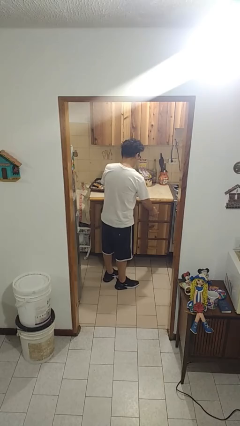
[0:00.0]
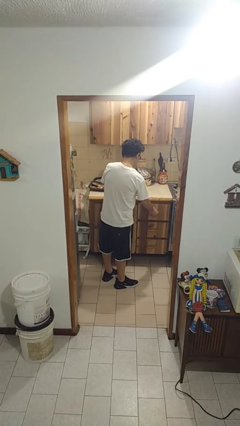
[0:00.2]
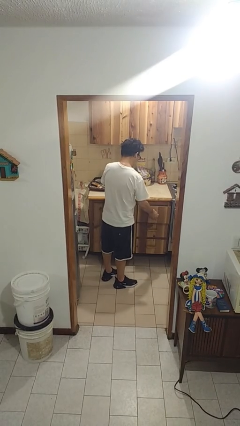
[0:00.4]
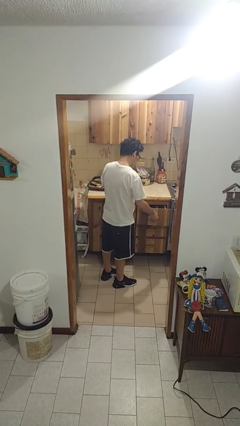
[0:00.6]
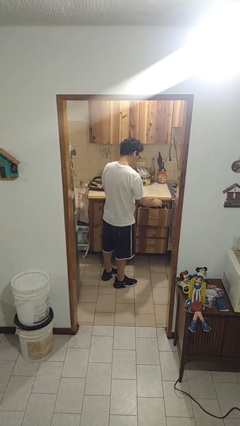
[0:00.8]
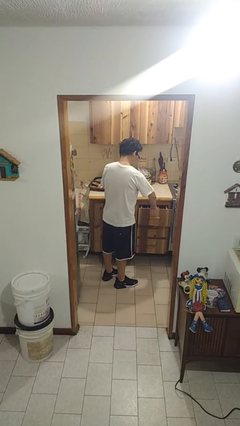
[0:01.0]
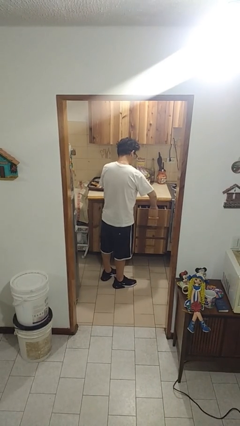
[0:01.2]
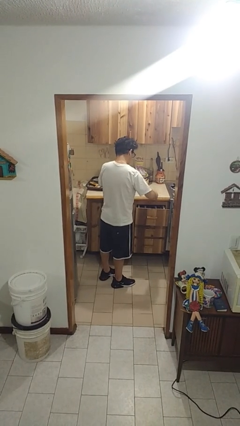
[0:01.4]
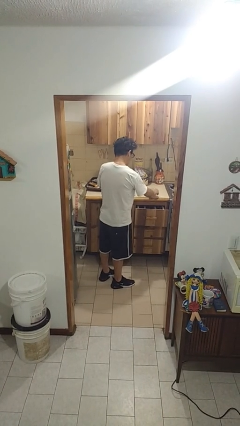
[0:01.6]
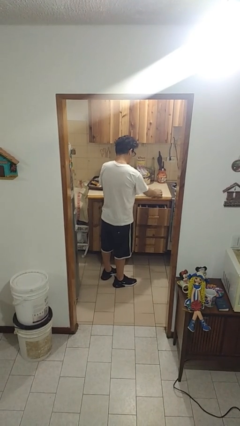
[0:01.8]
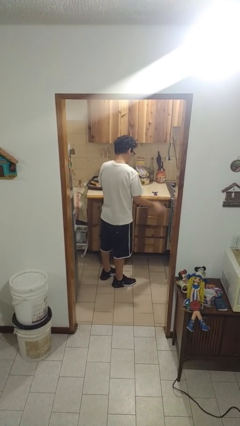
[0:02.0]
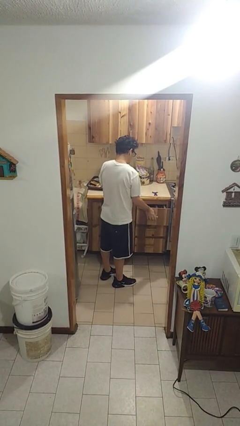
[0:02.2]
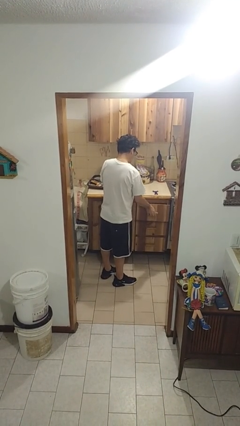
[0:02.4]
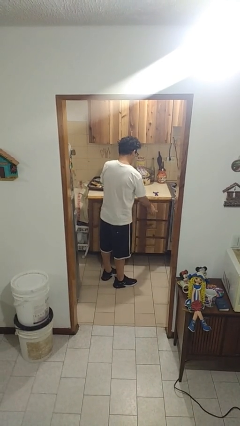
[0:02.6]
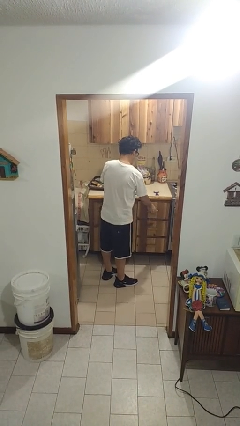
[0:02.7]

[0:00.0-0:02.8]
person takes object from kitchen drawer

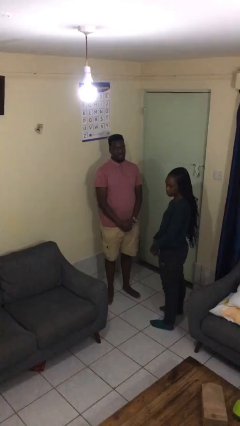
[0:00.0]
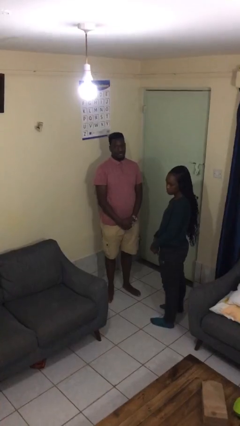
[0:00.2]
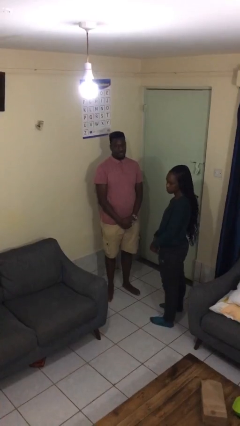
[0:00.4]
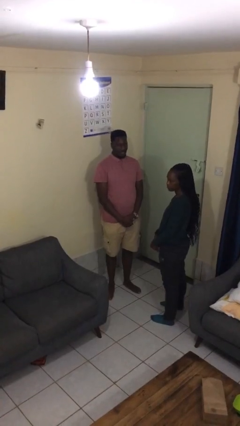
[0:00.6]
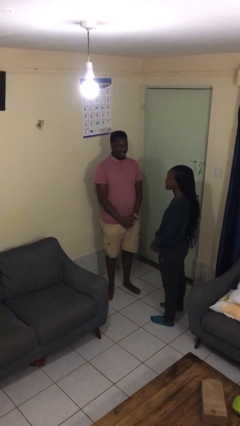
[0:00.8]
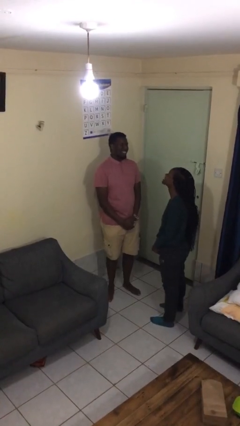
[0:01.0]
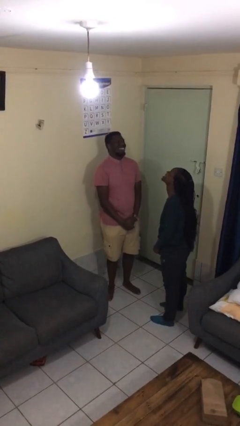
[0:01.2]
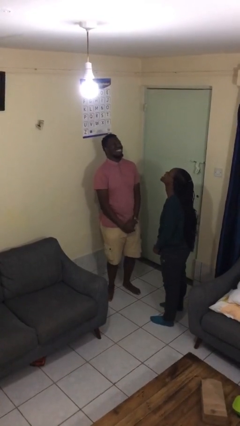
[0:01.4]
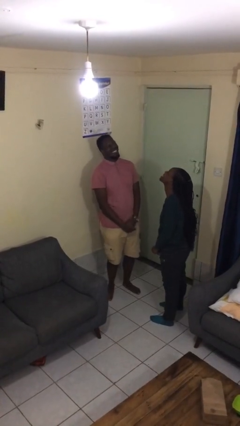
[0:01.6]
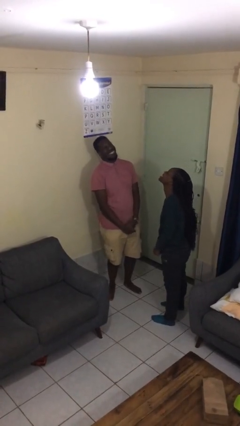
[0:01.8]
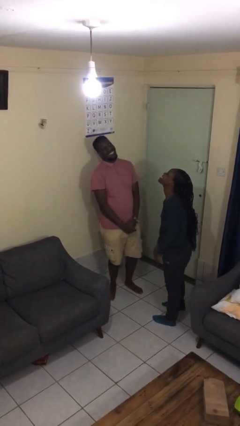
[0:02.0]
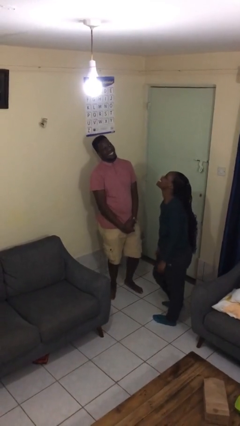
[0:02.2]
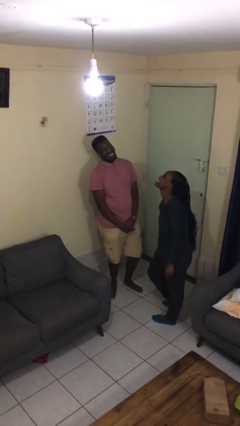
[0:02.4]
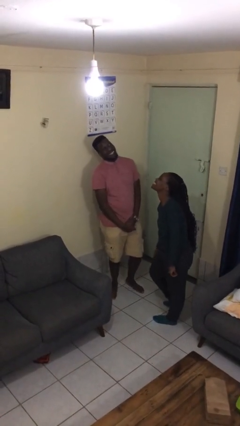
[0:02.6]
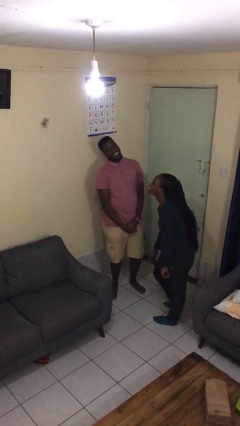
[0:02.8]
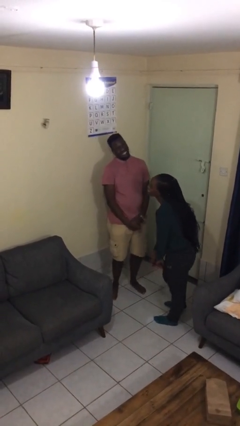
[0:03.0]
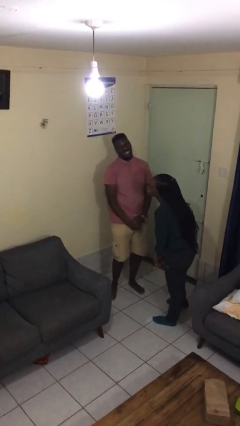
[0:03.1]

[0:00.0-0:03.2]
person laughs with person

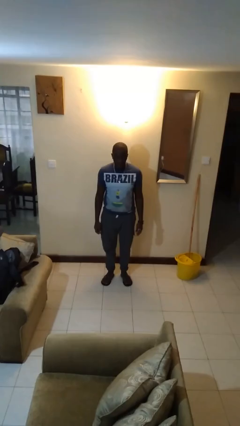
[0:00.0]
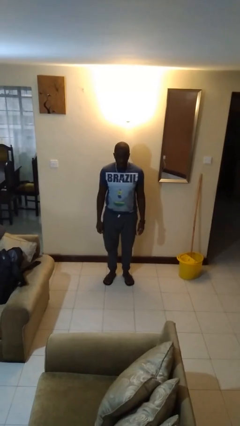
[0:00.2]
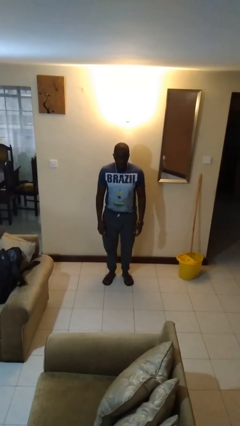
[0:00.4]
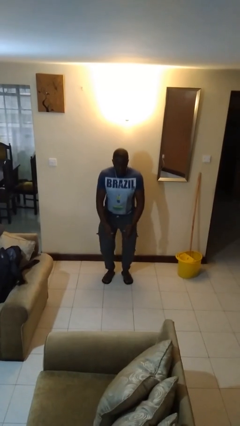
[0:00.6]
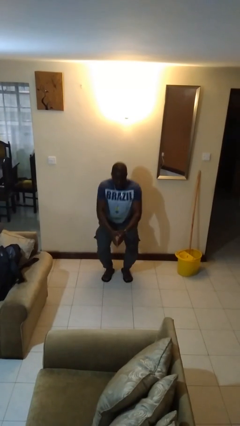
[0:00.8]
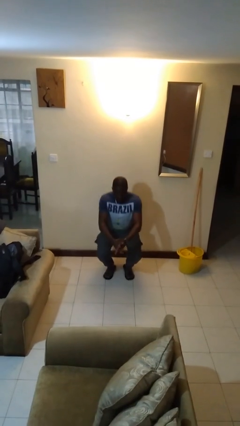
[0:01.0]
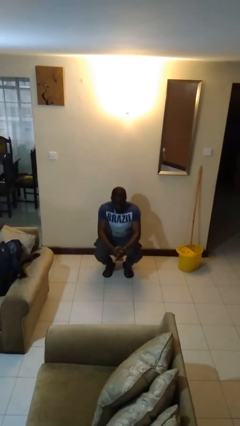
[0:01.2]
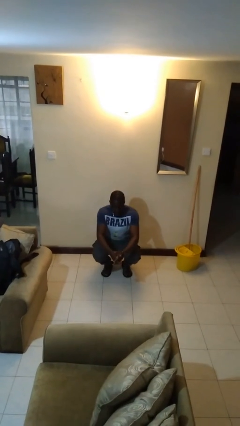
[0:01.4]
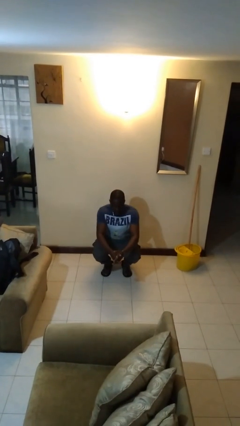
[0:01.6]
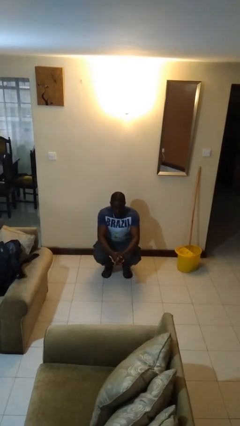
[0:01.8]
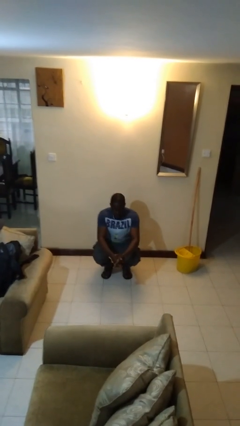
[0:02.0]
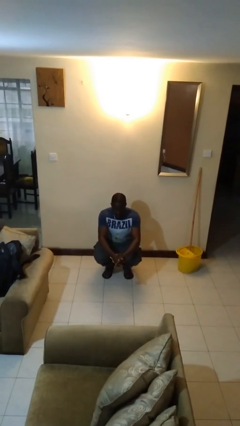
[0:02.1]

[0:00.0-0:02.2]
person squats

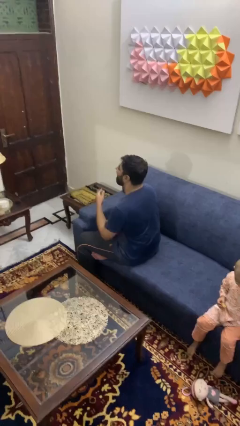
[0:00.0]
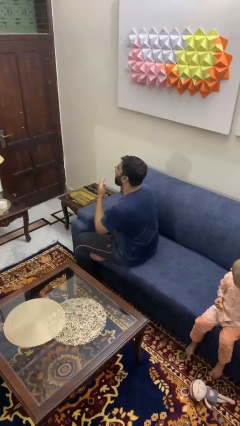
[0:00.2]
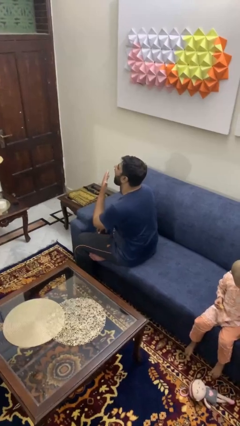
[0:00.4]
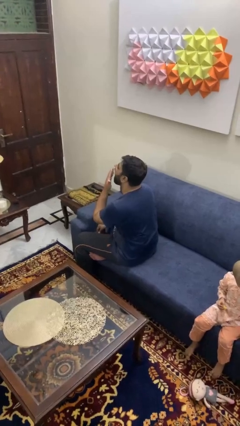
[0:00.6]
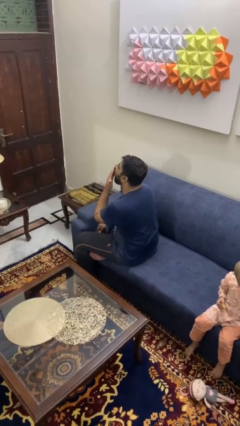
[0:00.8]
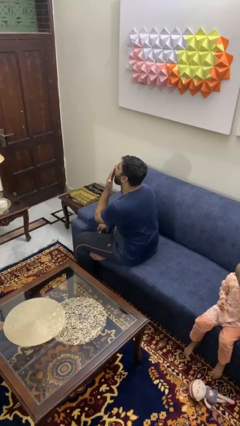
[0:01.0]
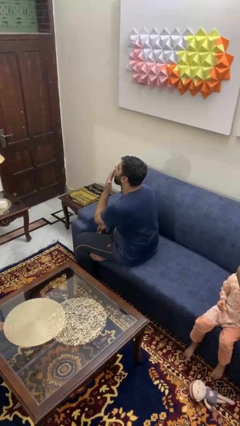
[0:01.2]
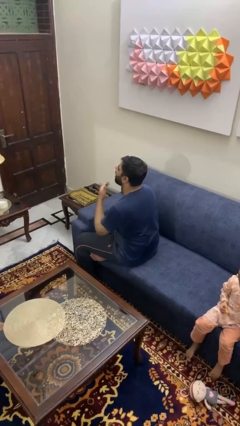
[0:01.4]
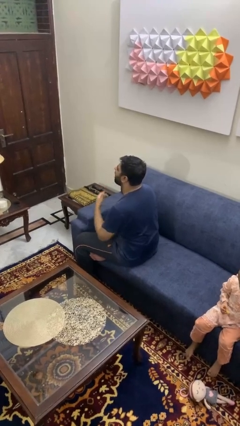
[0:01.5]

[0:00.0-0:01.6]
person yawns

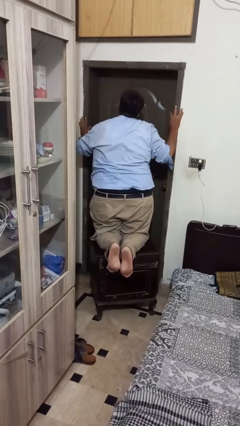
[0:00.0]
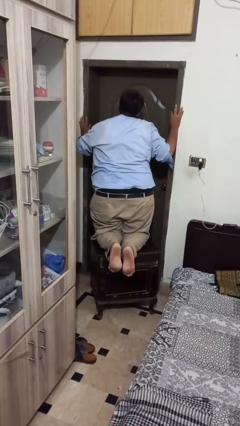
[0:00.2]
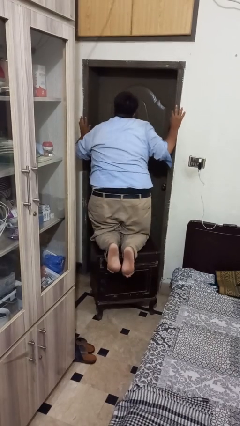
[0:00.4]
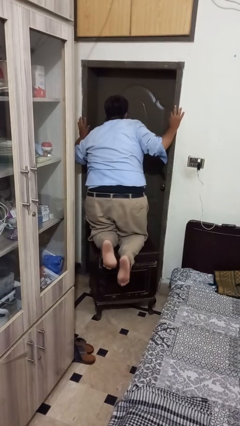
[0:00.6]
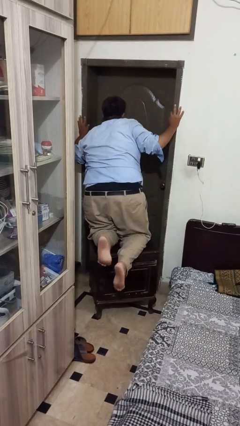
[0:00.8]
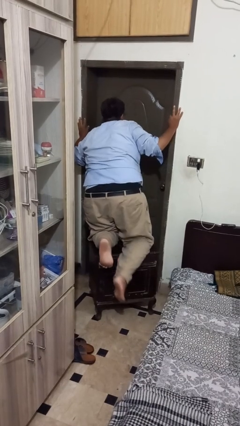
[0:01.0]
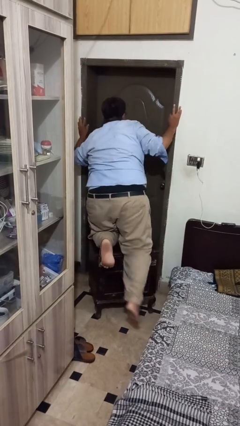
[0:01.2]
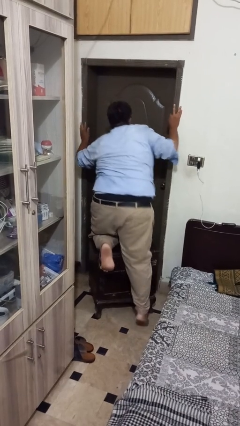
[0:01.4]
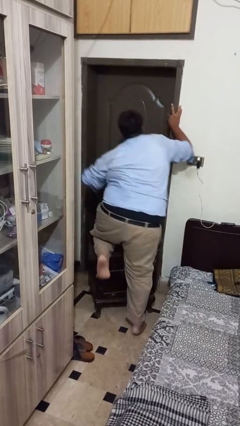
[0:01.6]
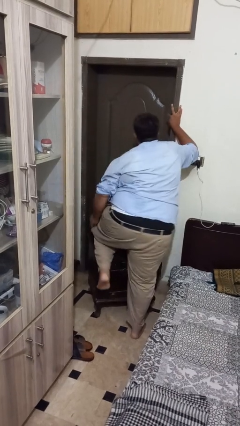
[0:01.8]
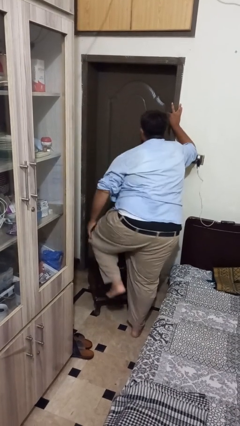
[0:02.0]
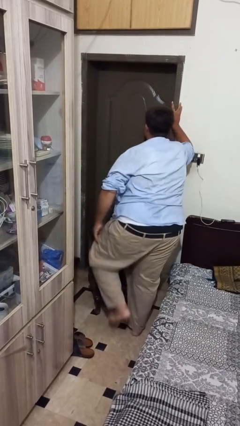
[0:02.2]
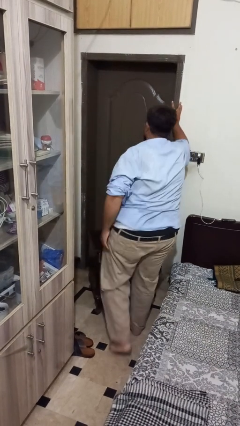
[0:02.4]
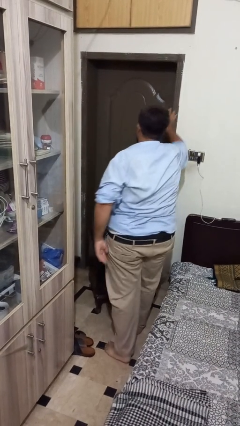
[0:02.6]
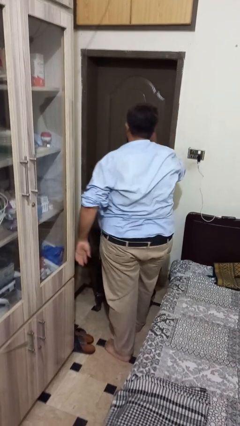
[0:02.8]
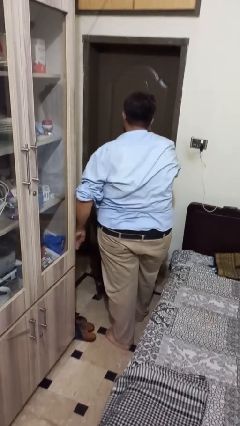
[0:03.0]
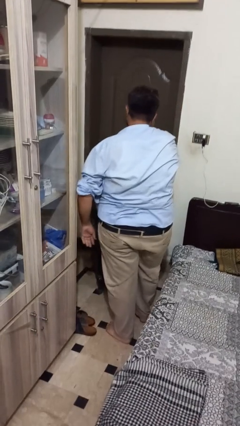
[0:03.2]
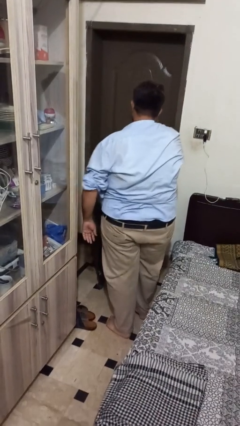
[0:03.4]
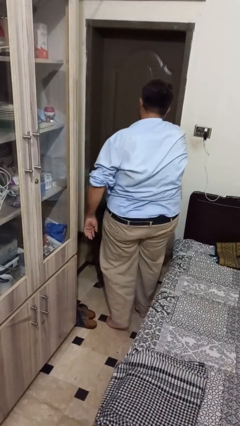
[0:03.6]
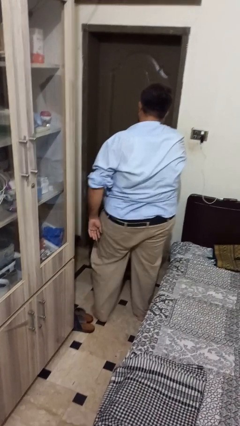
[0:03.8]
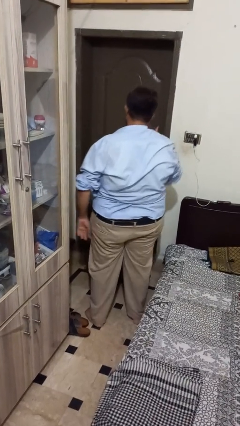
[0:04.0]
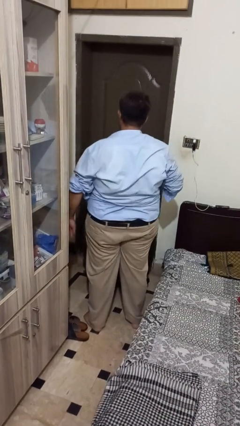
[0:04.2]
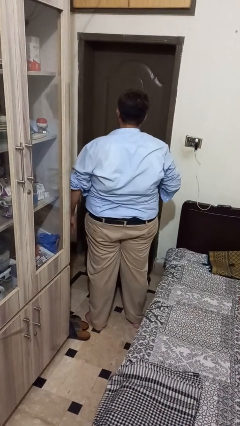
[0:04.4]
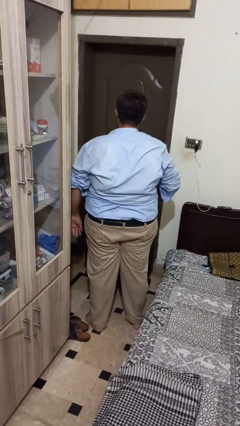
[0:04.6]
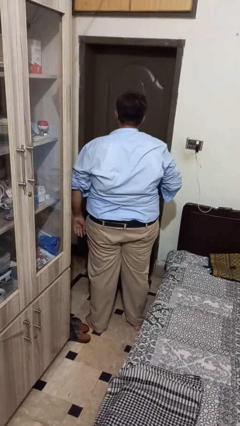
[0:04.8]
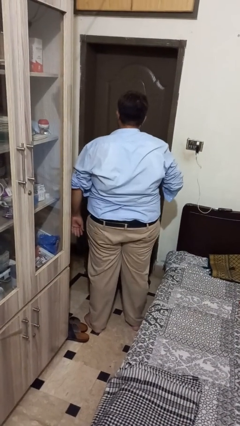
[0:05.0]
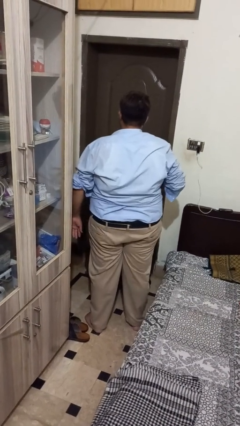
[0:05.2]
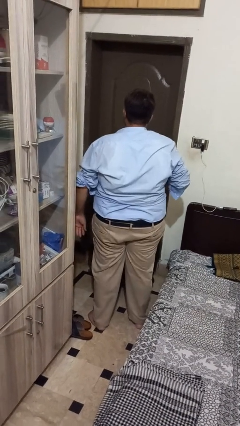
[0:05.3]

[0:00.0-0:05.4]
person climbs off table

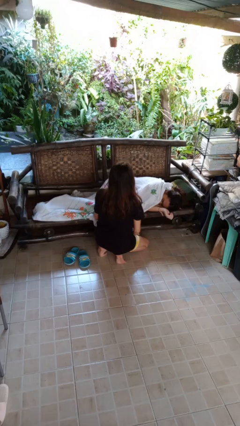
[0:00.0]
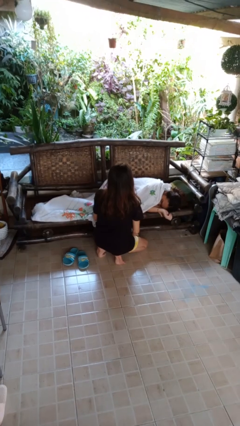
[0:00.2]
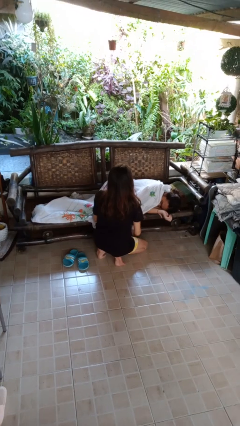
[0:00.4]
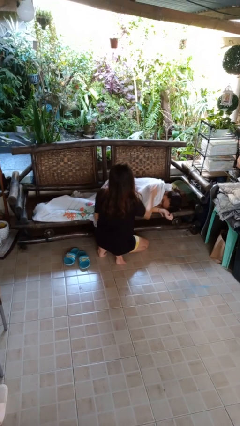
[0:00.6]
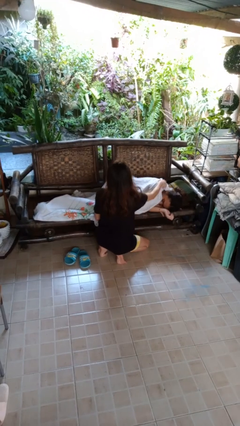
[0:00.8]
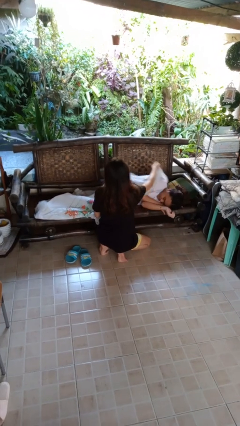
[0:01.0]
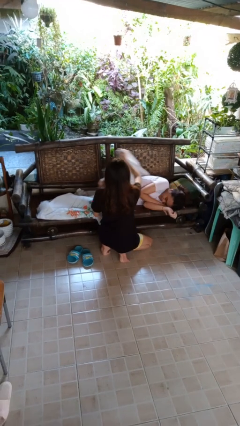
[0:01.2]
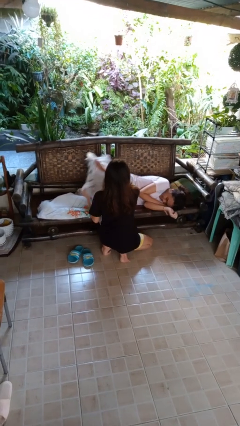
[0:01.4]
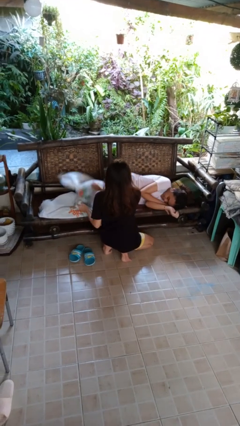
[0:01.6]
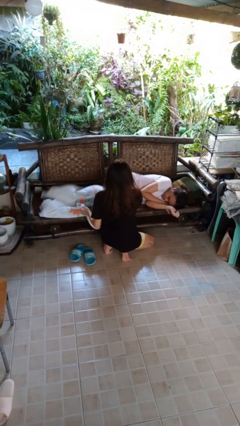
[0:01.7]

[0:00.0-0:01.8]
person uncovers friend with blanket

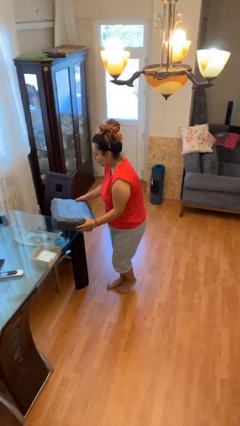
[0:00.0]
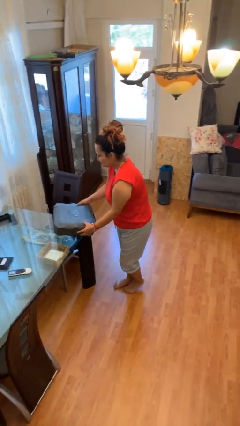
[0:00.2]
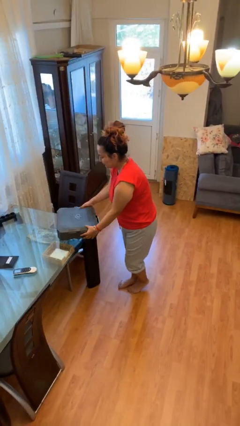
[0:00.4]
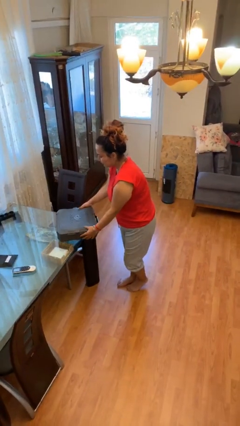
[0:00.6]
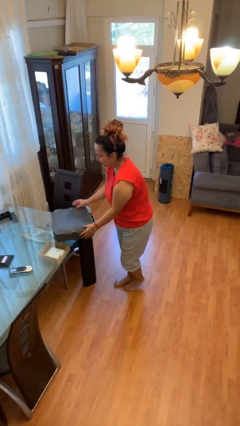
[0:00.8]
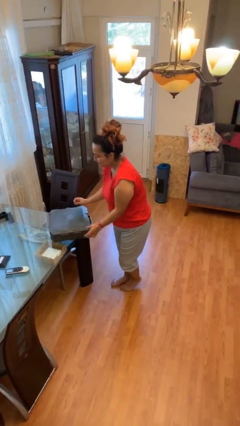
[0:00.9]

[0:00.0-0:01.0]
person puts down object on table
